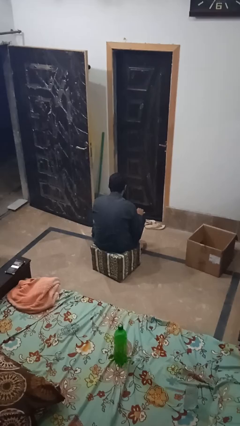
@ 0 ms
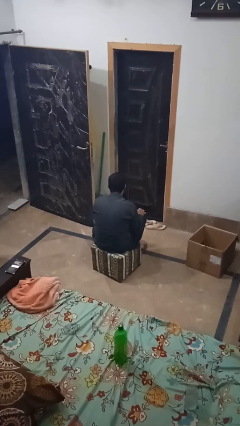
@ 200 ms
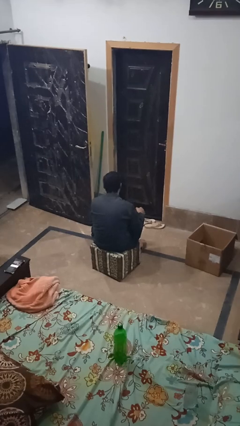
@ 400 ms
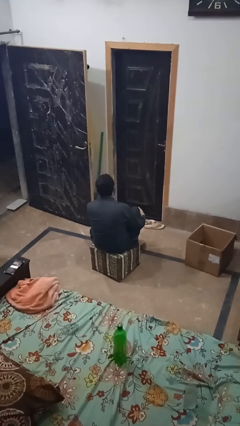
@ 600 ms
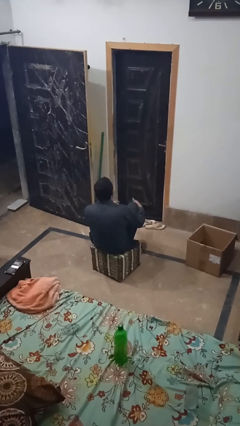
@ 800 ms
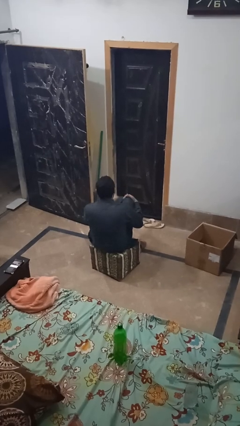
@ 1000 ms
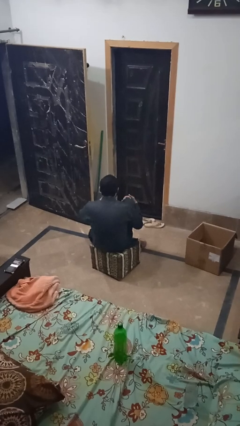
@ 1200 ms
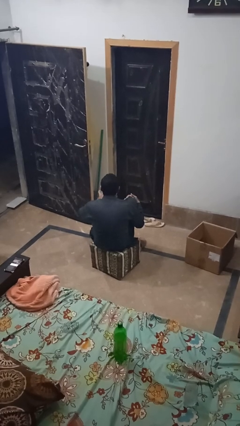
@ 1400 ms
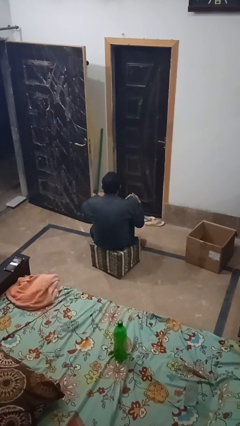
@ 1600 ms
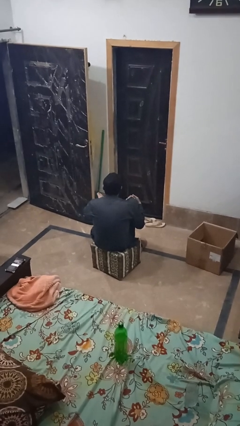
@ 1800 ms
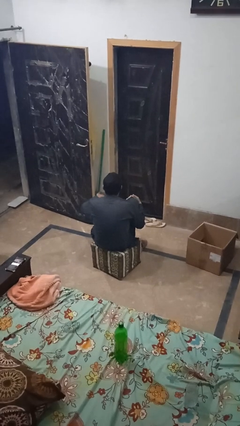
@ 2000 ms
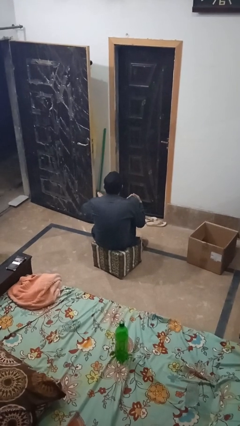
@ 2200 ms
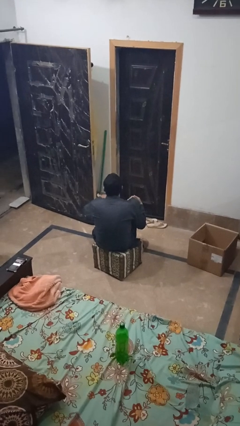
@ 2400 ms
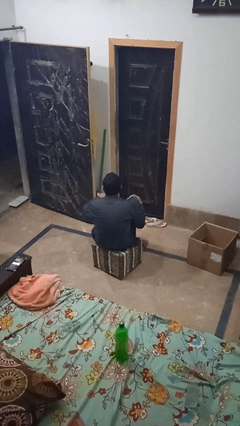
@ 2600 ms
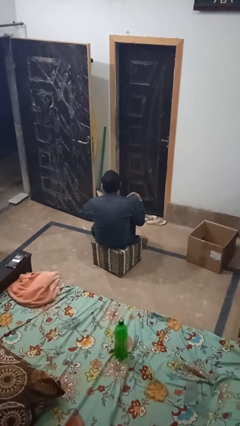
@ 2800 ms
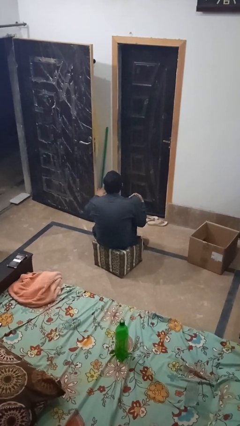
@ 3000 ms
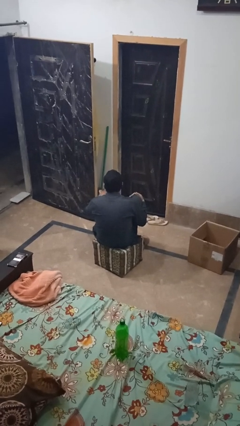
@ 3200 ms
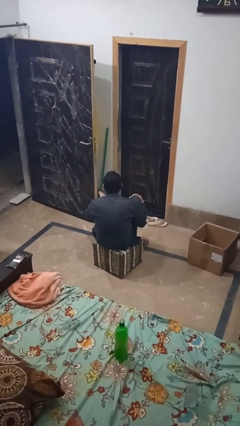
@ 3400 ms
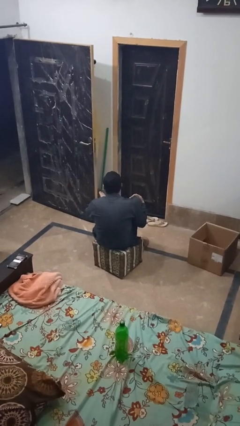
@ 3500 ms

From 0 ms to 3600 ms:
person rubs foot

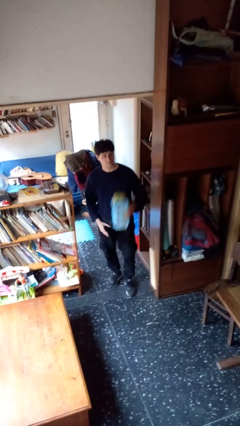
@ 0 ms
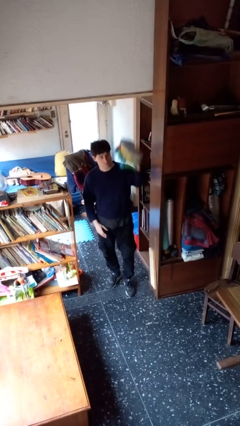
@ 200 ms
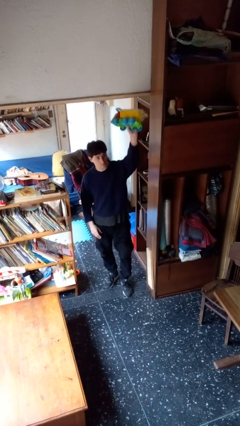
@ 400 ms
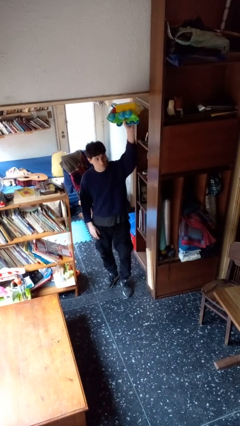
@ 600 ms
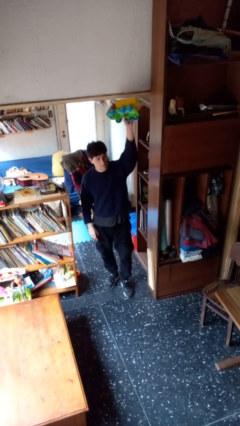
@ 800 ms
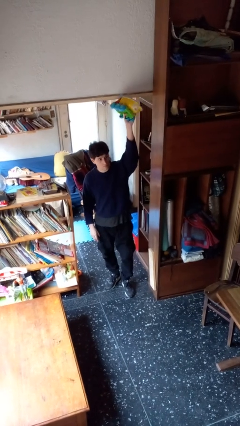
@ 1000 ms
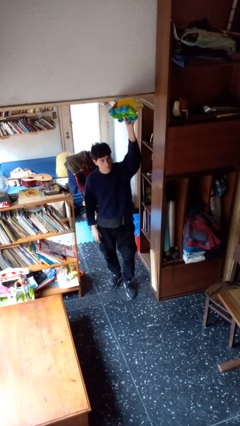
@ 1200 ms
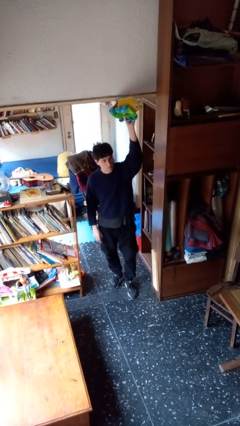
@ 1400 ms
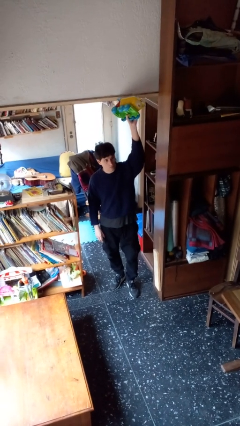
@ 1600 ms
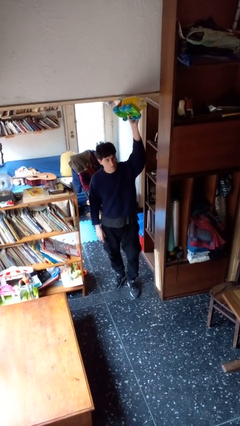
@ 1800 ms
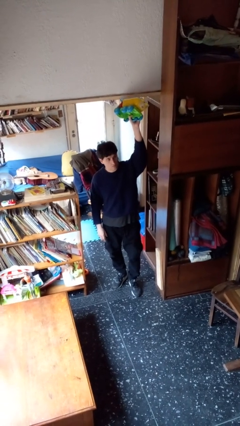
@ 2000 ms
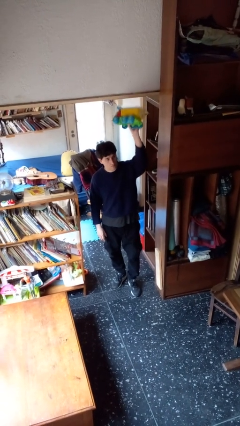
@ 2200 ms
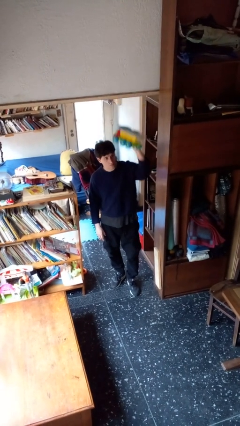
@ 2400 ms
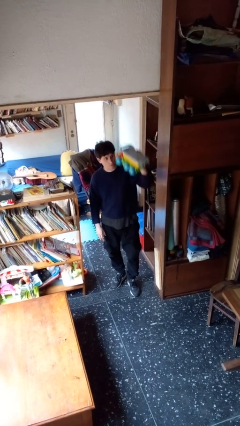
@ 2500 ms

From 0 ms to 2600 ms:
person holds object above head

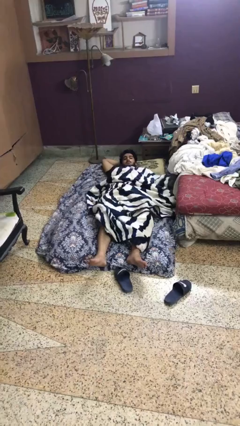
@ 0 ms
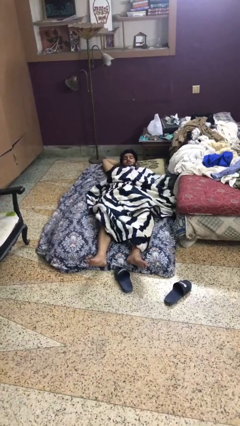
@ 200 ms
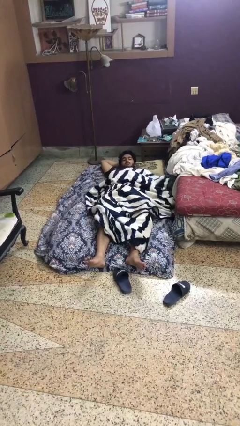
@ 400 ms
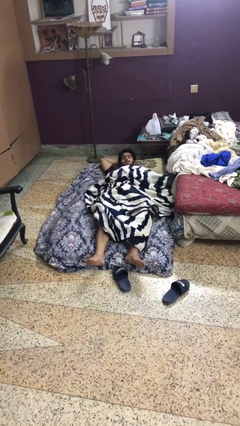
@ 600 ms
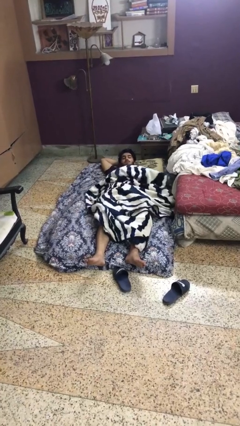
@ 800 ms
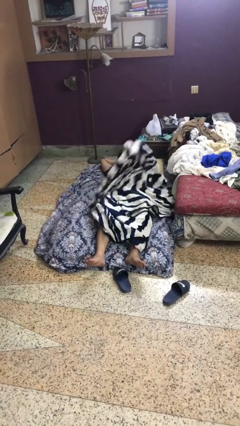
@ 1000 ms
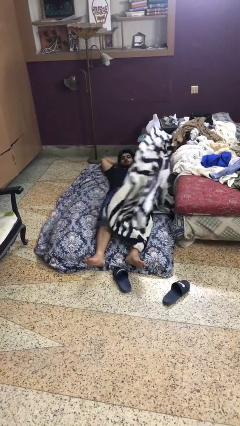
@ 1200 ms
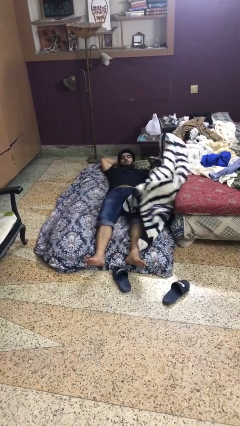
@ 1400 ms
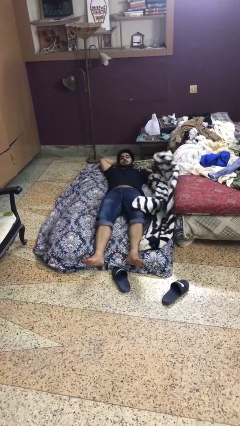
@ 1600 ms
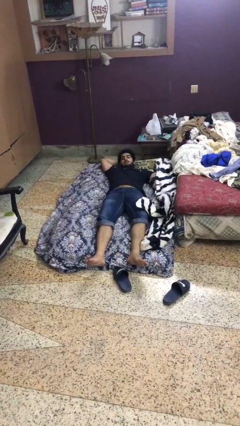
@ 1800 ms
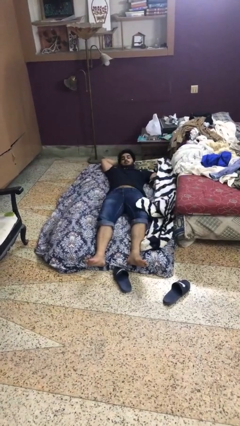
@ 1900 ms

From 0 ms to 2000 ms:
person uncovers with blanket

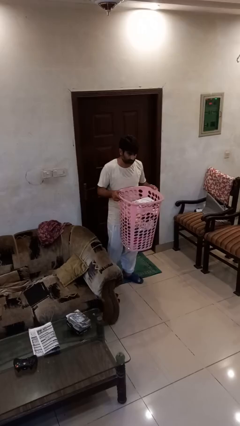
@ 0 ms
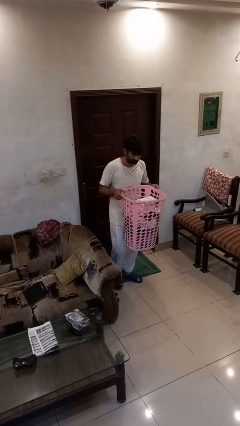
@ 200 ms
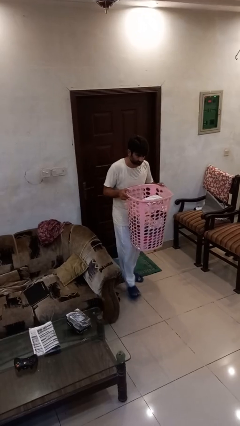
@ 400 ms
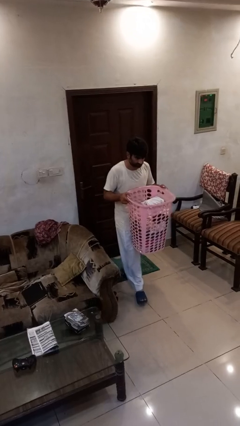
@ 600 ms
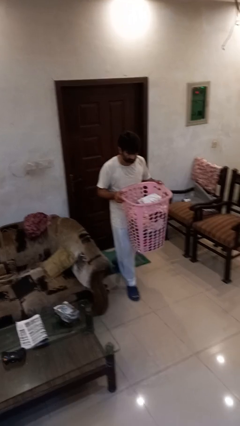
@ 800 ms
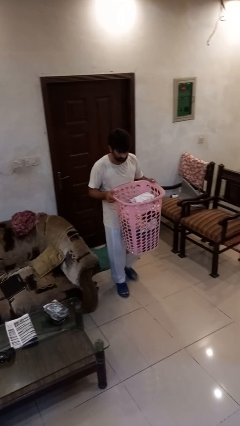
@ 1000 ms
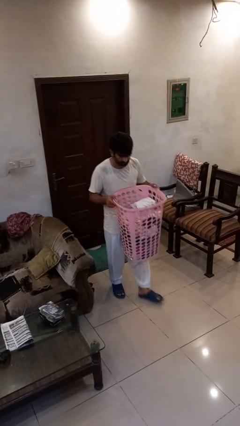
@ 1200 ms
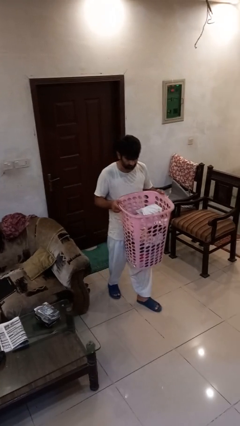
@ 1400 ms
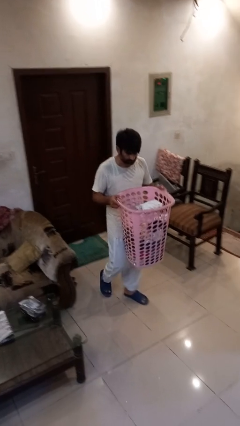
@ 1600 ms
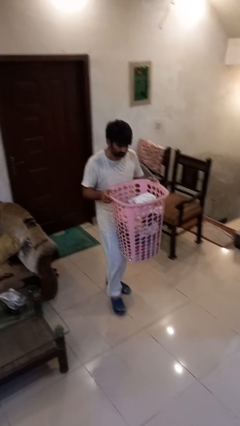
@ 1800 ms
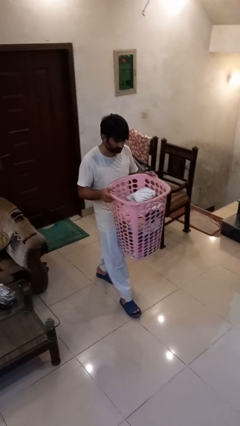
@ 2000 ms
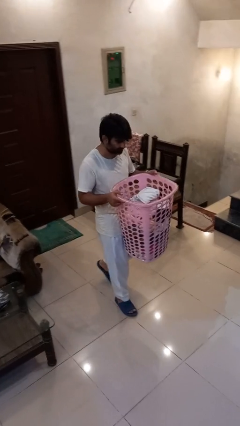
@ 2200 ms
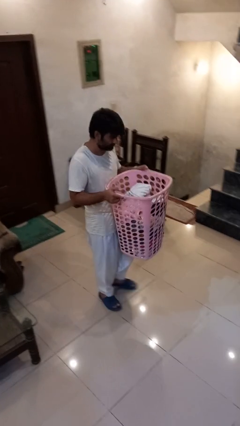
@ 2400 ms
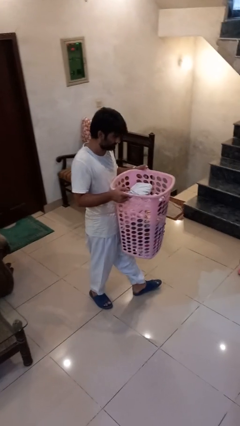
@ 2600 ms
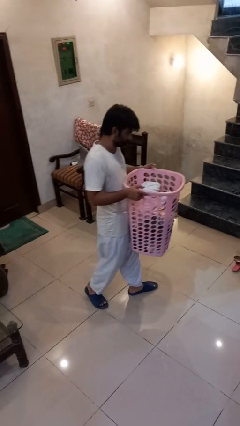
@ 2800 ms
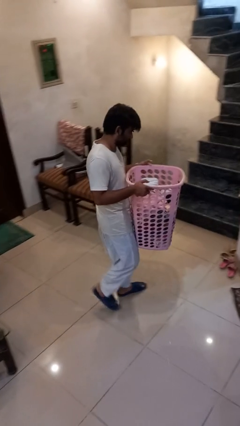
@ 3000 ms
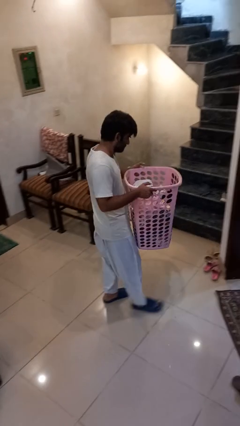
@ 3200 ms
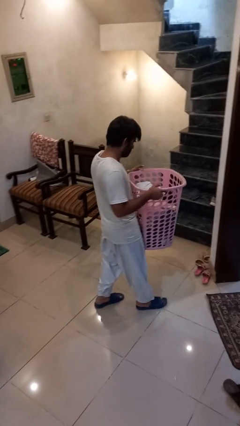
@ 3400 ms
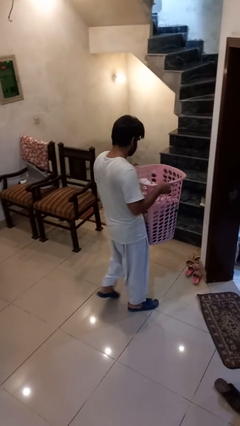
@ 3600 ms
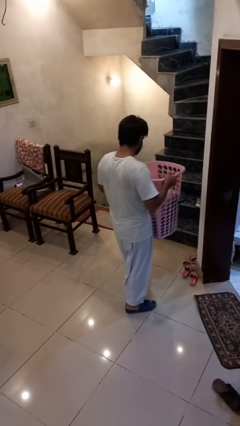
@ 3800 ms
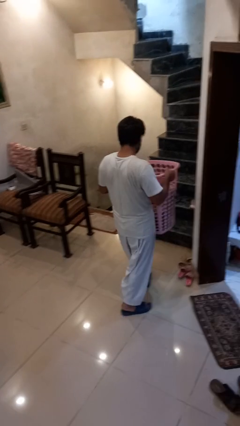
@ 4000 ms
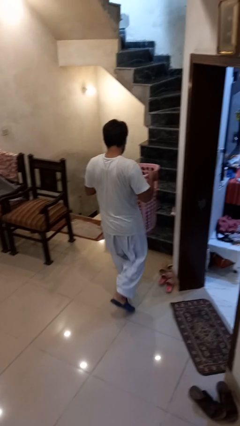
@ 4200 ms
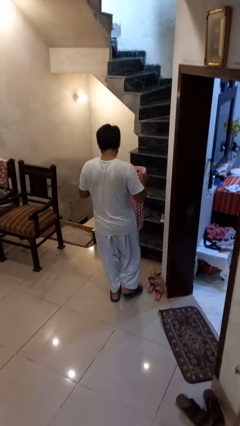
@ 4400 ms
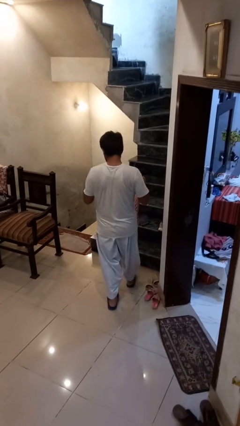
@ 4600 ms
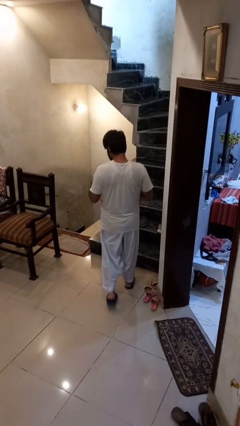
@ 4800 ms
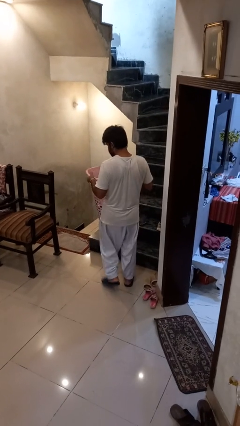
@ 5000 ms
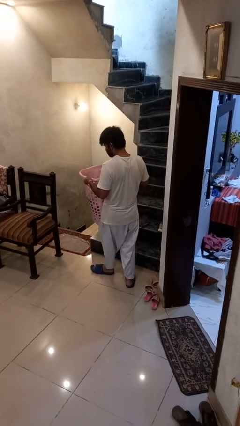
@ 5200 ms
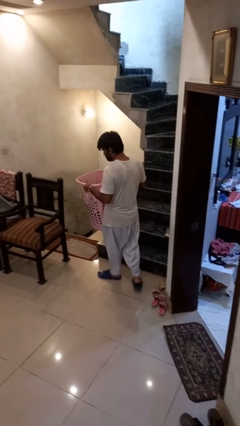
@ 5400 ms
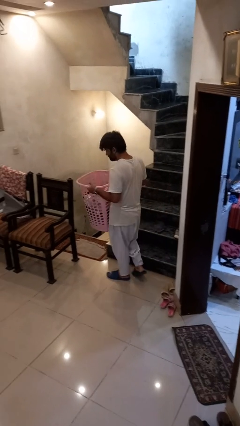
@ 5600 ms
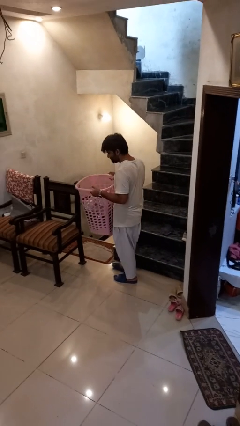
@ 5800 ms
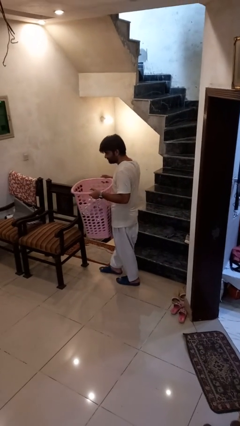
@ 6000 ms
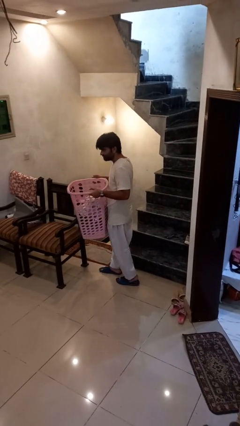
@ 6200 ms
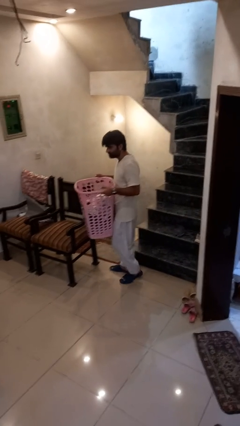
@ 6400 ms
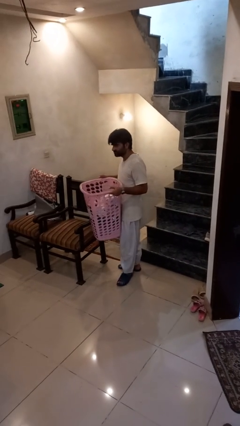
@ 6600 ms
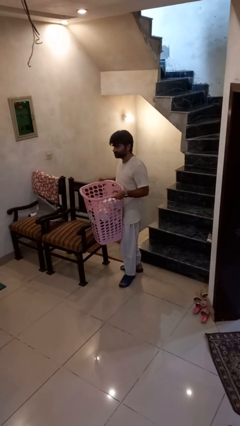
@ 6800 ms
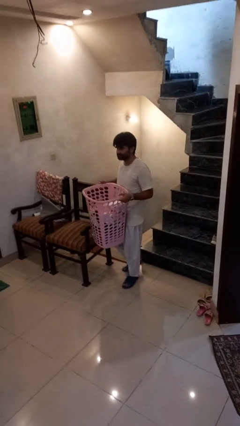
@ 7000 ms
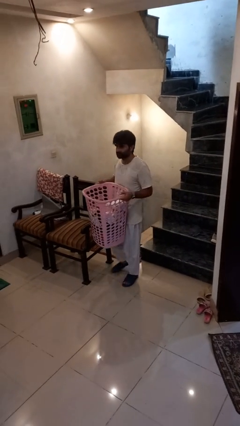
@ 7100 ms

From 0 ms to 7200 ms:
person carries laundry basket

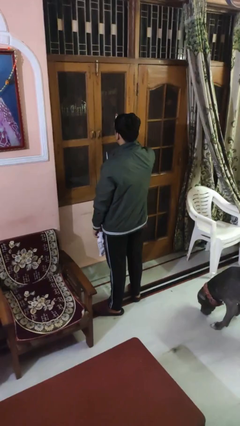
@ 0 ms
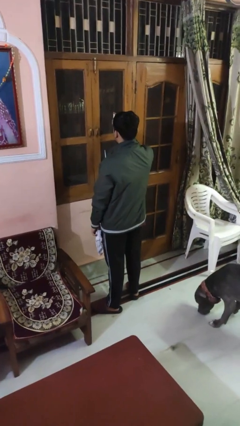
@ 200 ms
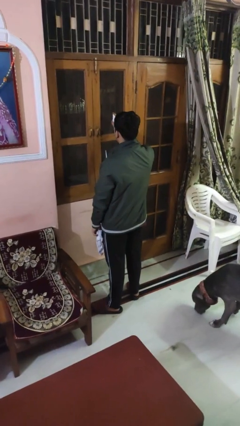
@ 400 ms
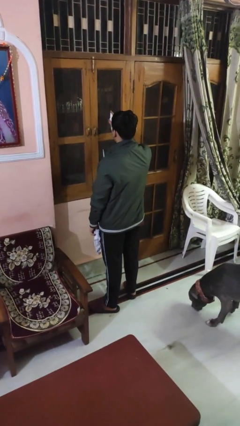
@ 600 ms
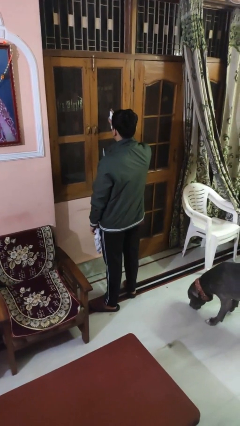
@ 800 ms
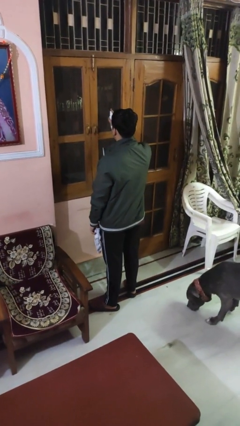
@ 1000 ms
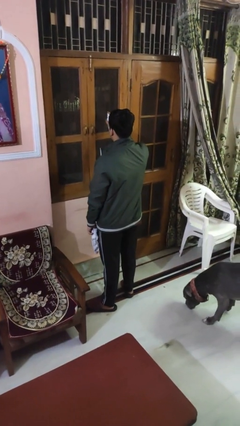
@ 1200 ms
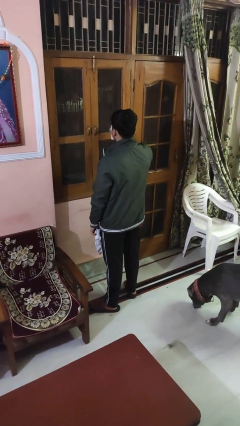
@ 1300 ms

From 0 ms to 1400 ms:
person sprays from bottle

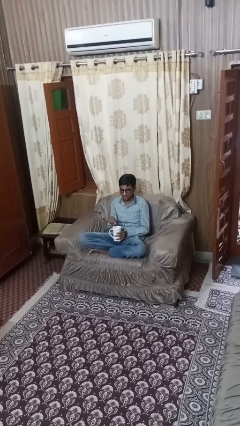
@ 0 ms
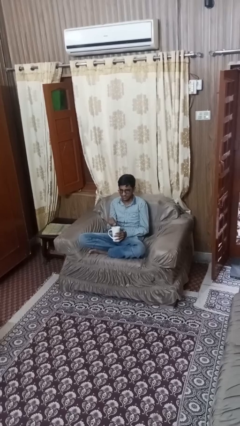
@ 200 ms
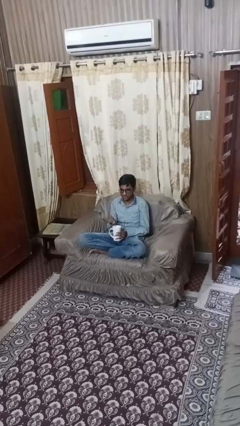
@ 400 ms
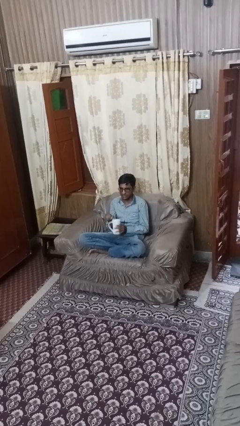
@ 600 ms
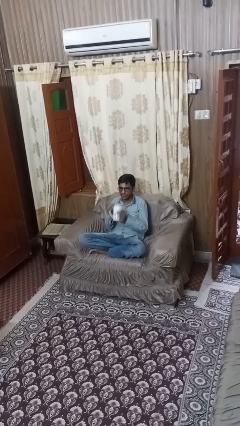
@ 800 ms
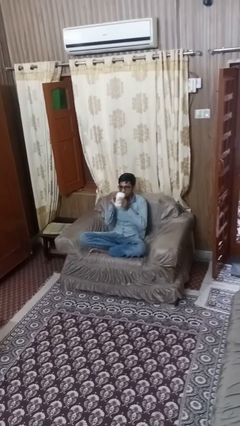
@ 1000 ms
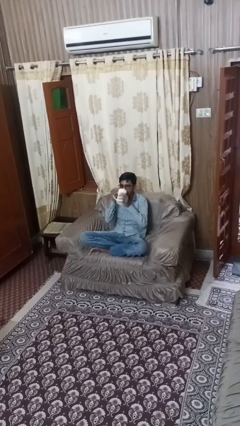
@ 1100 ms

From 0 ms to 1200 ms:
person stirs mug
